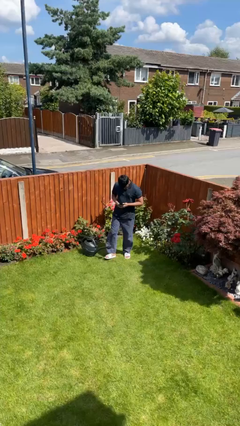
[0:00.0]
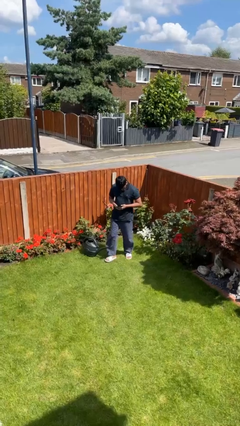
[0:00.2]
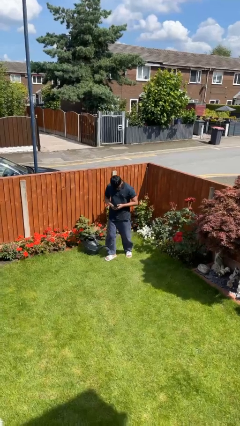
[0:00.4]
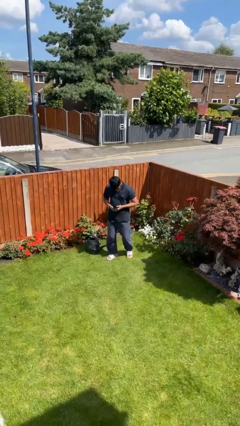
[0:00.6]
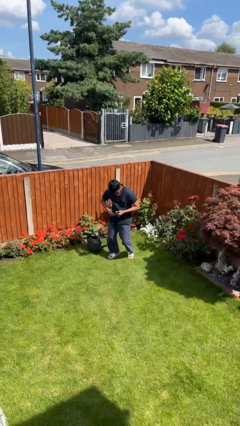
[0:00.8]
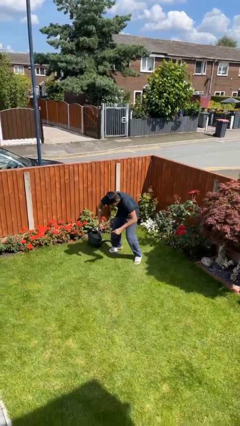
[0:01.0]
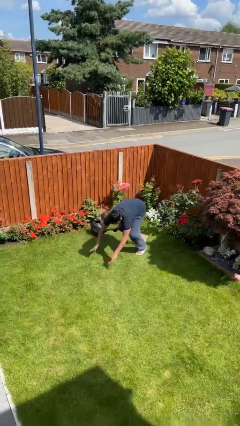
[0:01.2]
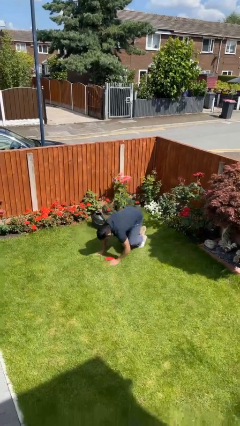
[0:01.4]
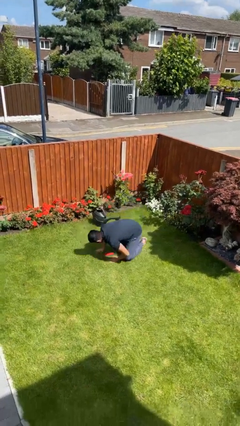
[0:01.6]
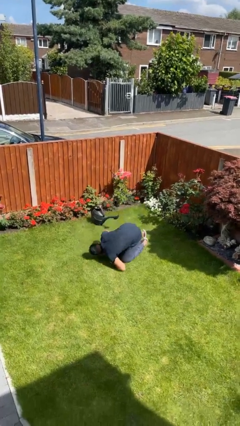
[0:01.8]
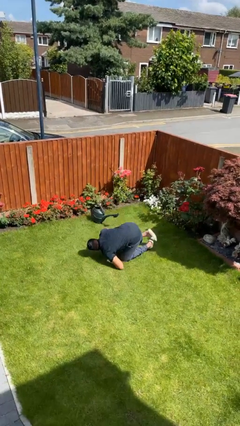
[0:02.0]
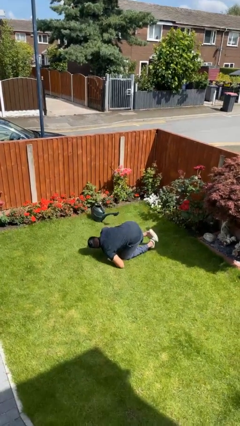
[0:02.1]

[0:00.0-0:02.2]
person trips on object on floor

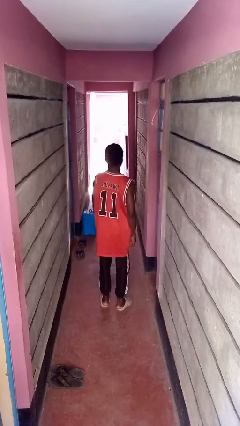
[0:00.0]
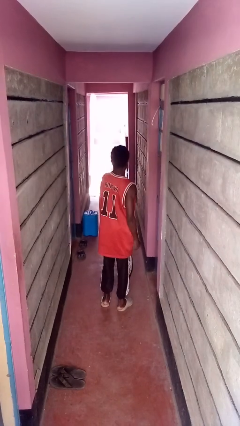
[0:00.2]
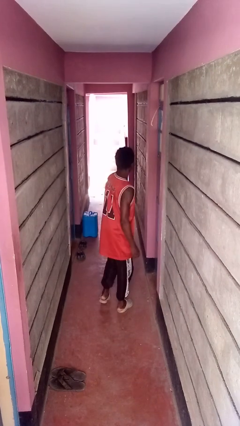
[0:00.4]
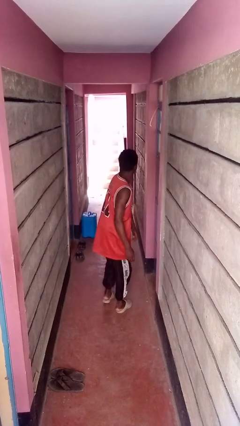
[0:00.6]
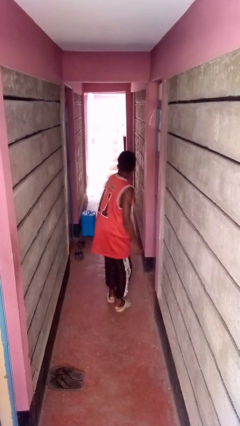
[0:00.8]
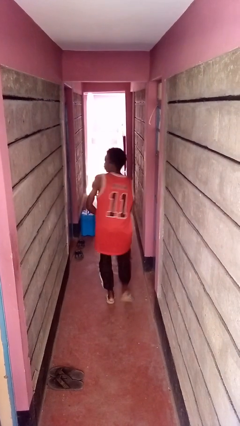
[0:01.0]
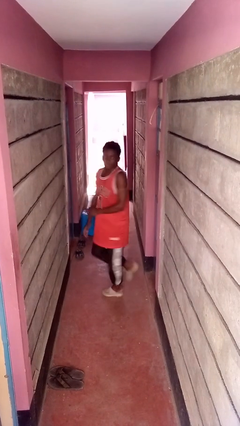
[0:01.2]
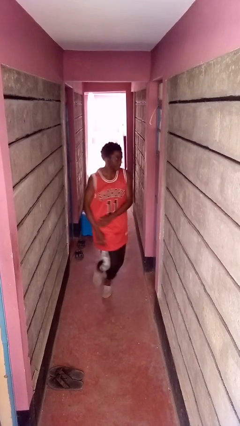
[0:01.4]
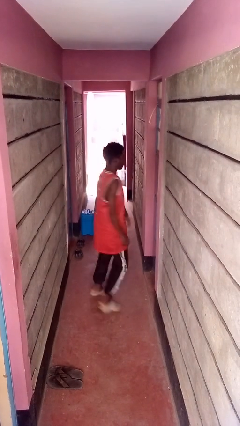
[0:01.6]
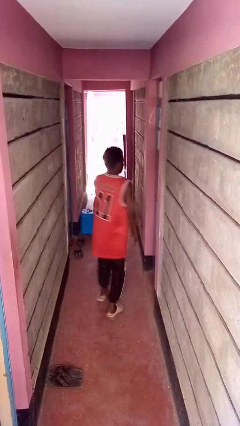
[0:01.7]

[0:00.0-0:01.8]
person twirls

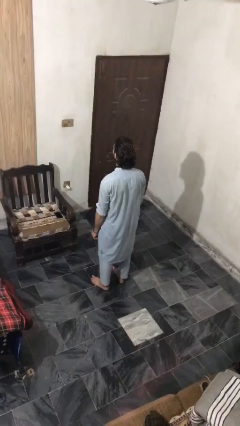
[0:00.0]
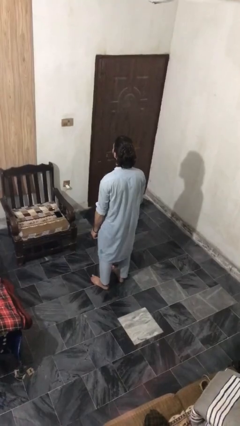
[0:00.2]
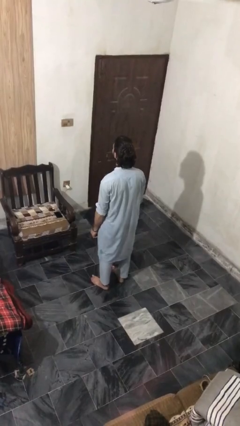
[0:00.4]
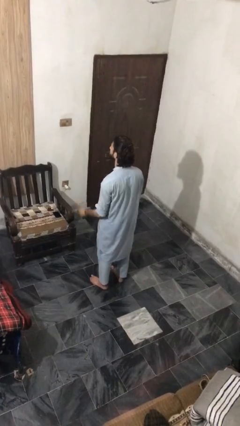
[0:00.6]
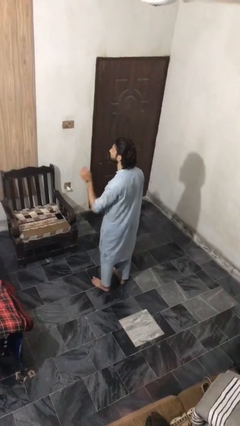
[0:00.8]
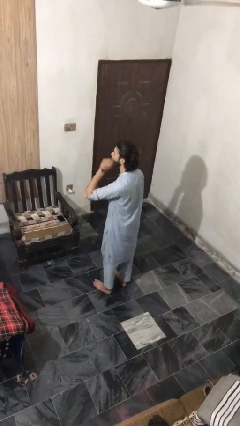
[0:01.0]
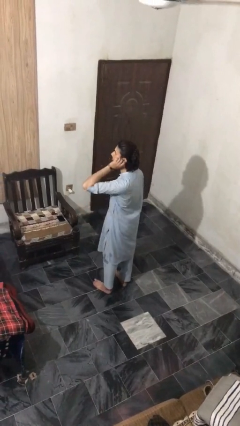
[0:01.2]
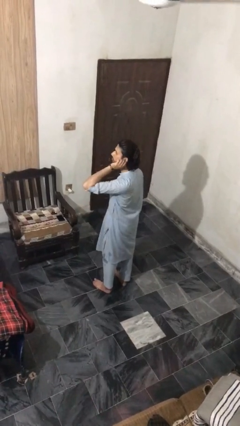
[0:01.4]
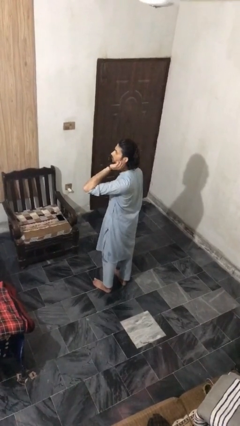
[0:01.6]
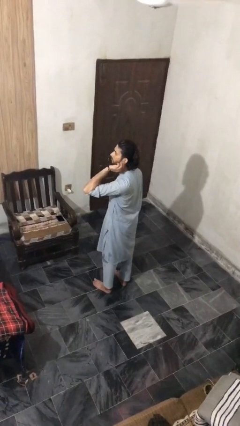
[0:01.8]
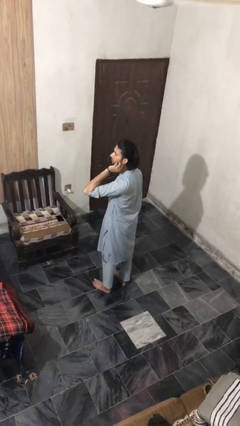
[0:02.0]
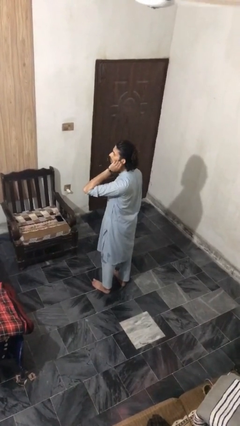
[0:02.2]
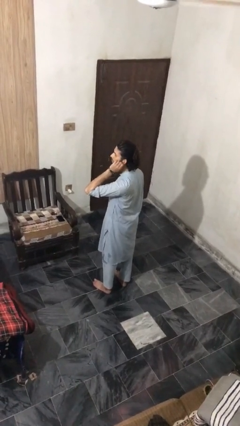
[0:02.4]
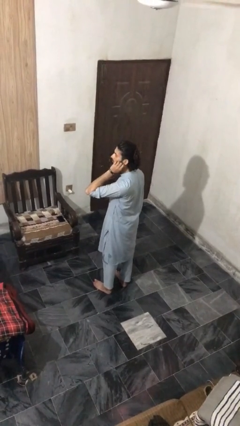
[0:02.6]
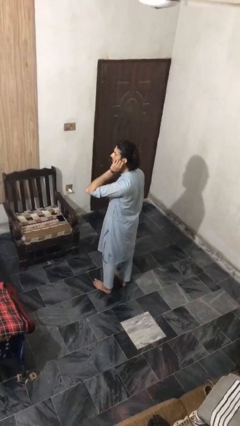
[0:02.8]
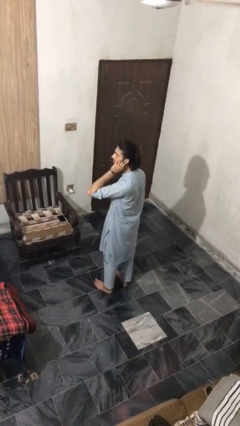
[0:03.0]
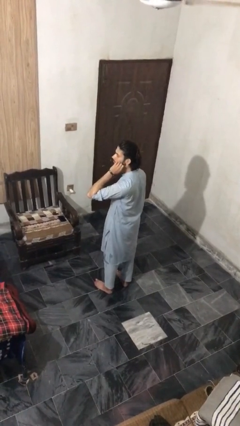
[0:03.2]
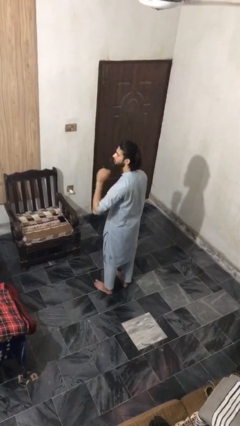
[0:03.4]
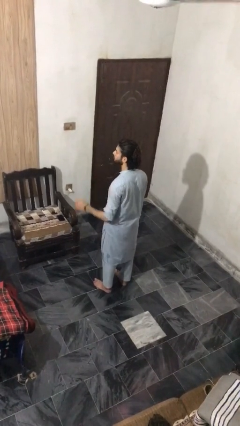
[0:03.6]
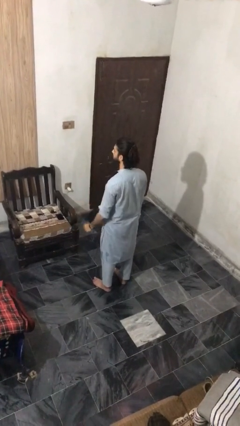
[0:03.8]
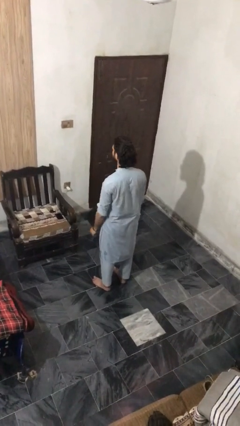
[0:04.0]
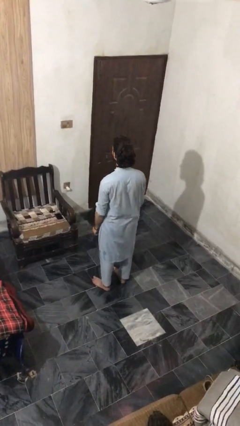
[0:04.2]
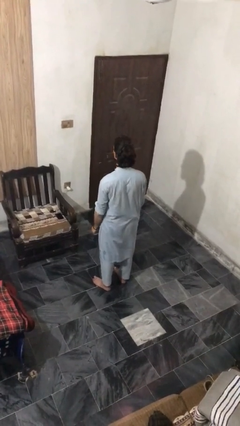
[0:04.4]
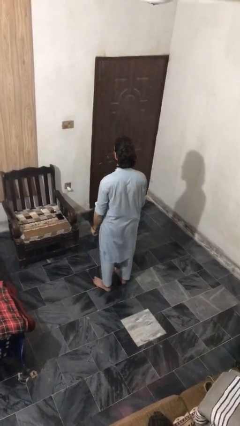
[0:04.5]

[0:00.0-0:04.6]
person touches earlobe

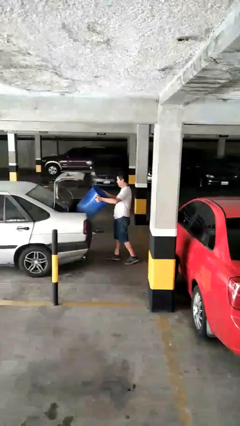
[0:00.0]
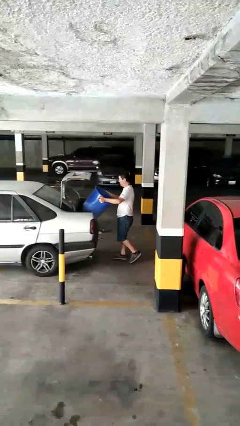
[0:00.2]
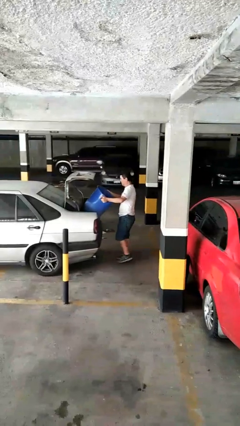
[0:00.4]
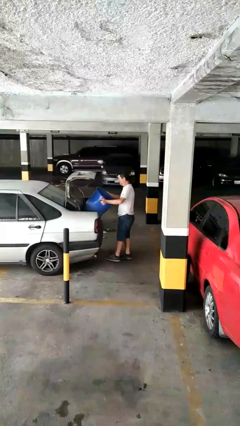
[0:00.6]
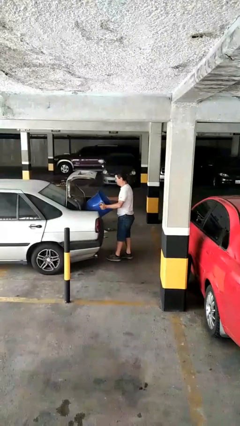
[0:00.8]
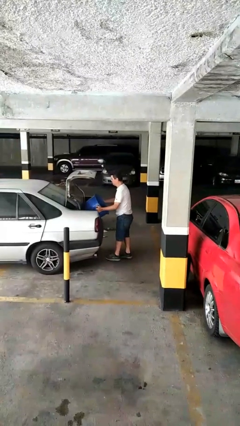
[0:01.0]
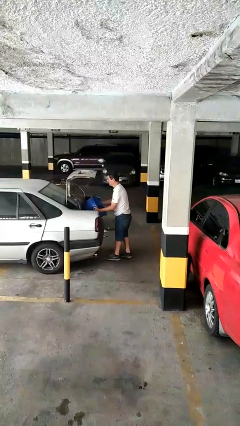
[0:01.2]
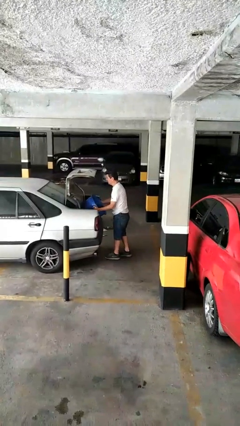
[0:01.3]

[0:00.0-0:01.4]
person loads car

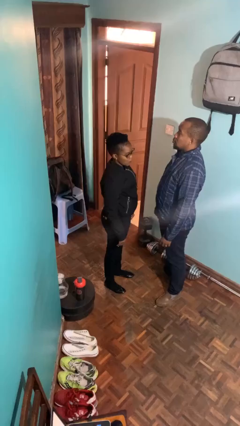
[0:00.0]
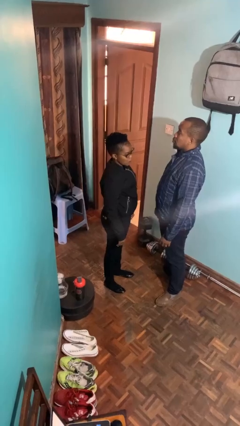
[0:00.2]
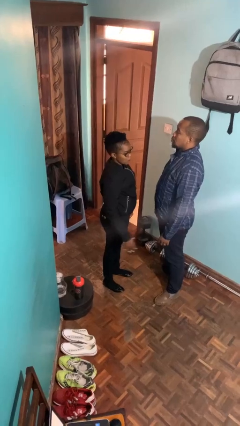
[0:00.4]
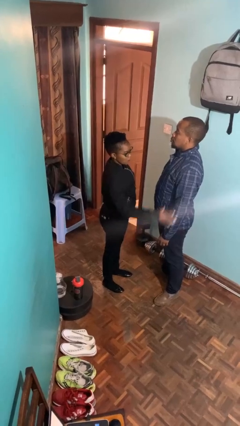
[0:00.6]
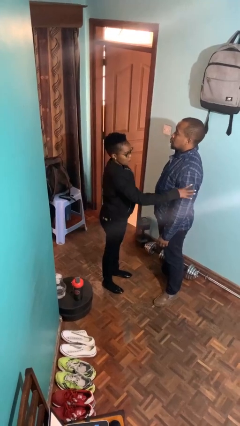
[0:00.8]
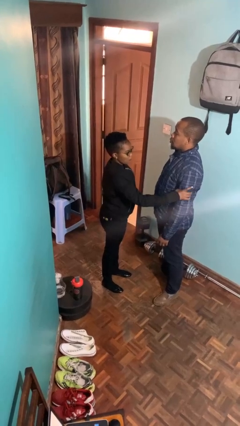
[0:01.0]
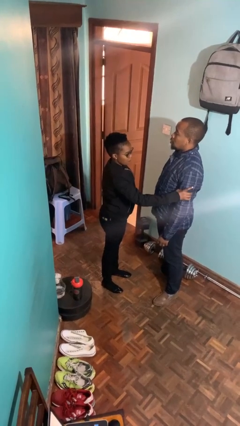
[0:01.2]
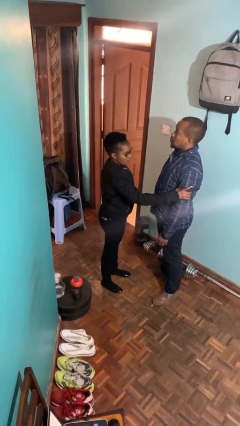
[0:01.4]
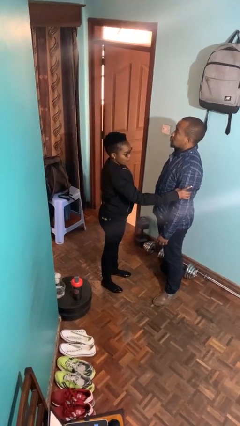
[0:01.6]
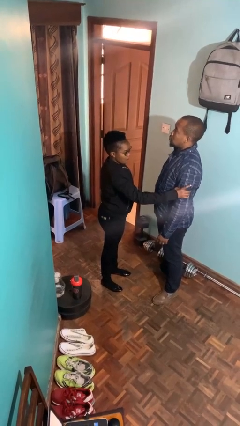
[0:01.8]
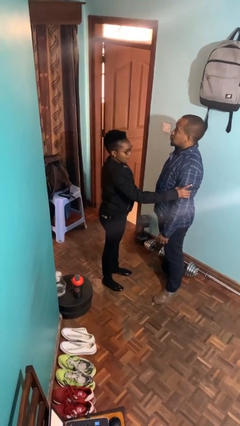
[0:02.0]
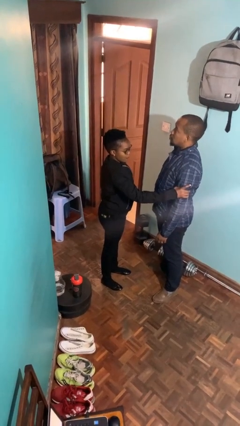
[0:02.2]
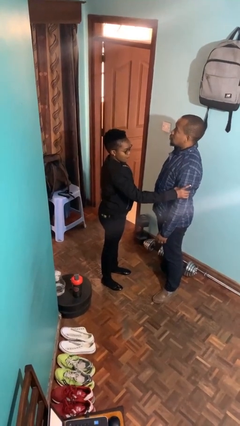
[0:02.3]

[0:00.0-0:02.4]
person grabs person by bicep

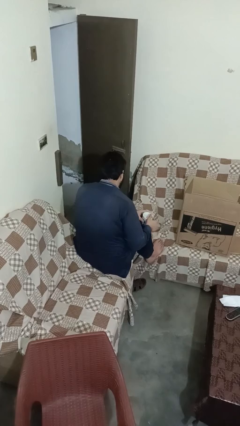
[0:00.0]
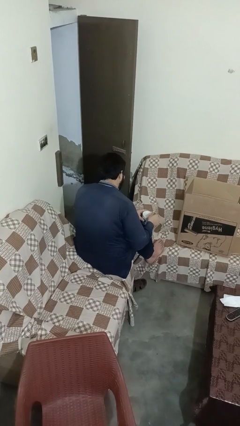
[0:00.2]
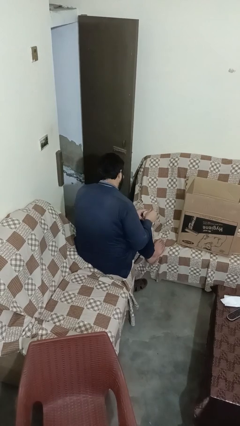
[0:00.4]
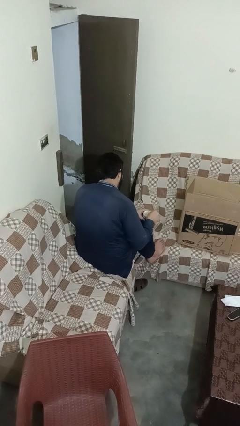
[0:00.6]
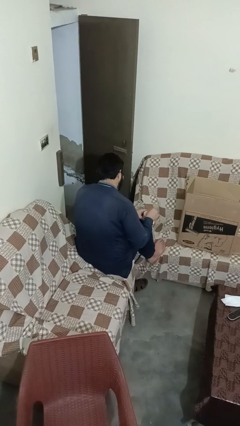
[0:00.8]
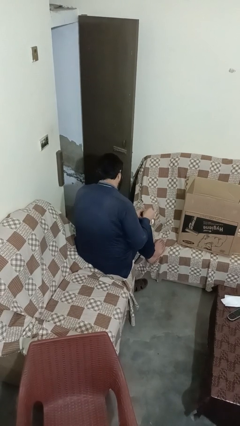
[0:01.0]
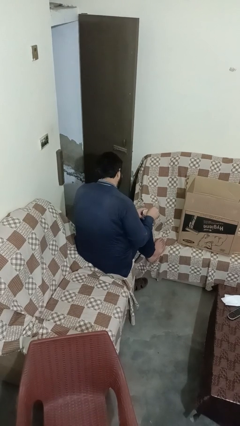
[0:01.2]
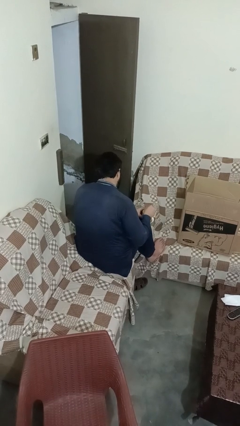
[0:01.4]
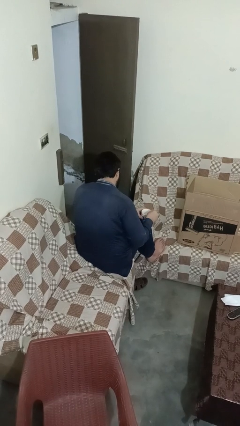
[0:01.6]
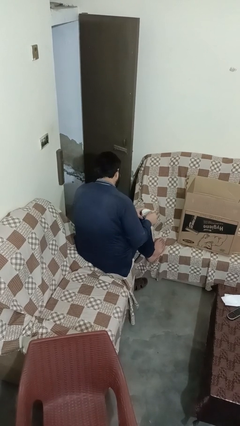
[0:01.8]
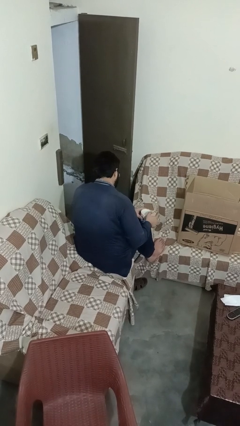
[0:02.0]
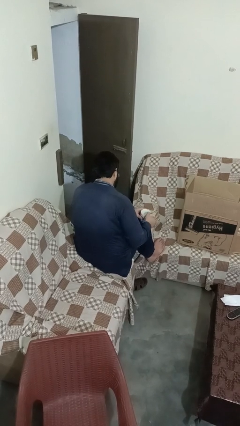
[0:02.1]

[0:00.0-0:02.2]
person stirs mug

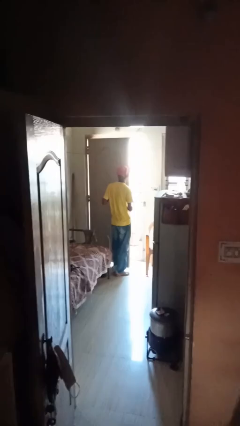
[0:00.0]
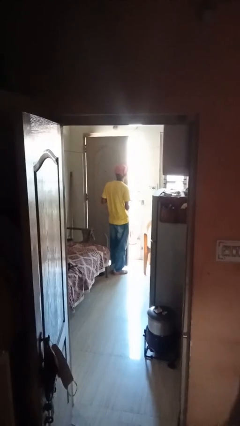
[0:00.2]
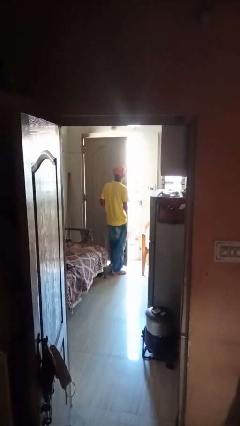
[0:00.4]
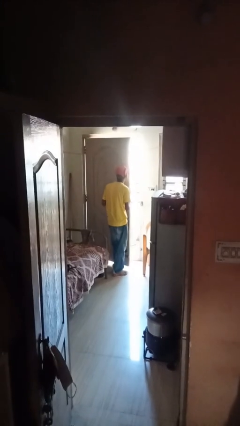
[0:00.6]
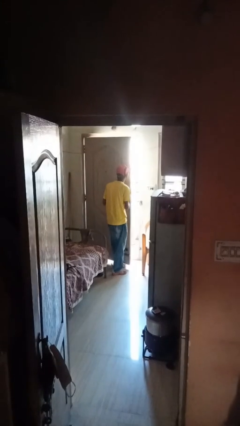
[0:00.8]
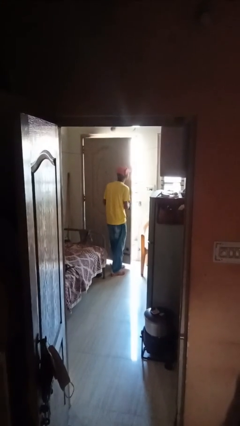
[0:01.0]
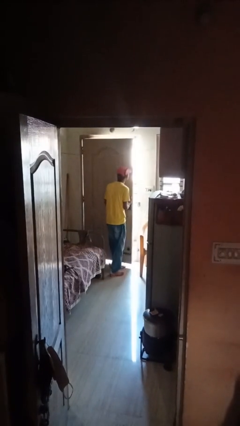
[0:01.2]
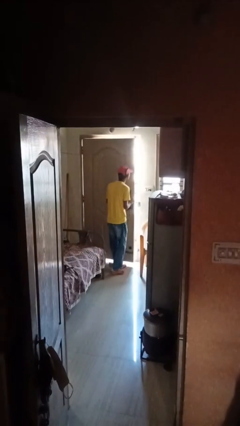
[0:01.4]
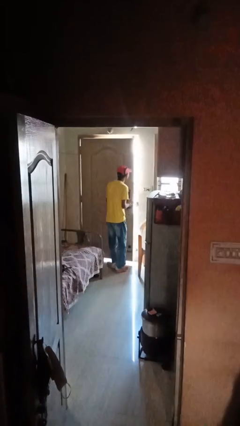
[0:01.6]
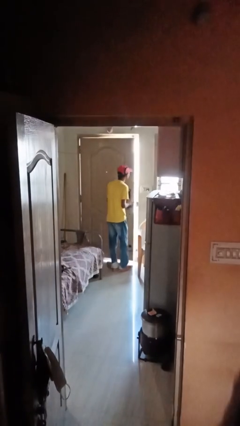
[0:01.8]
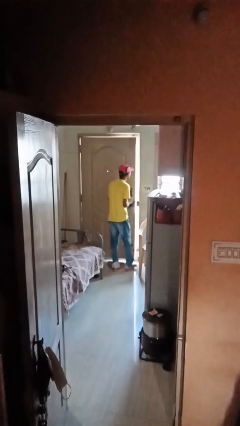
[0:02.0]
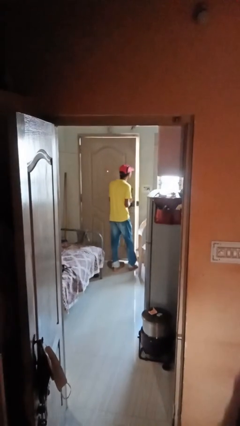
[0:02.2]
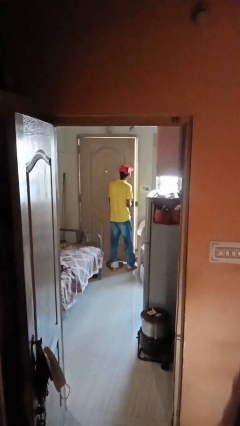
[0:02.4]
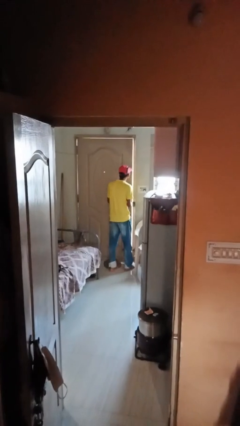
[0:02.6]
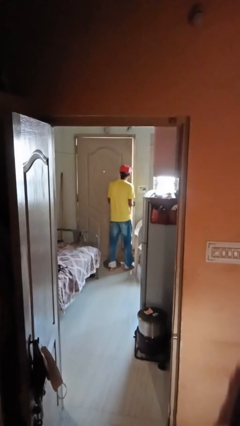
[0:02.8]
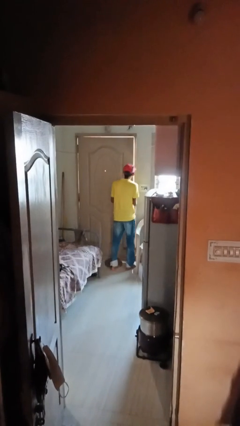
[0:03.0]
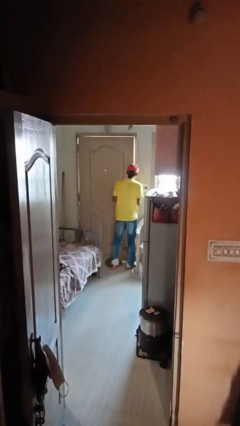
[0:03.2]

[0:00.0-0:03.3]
person closes facility door
